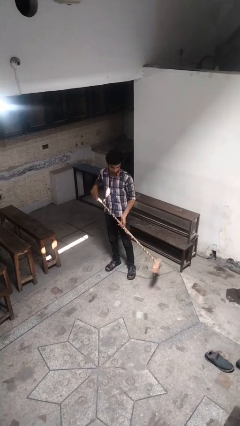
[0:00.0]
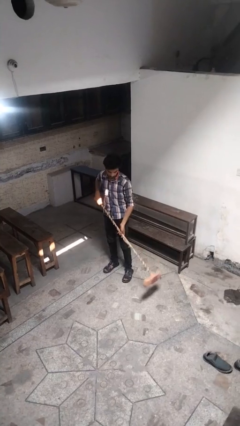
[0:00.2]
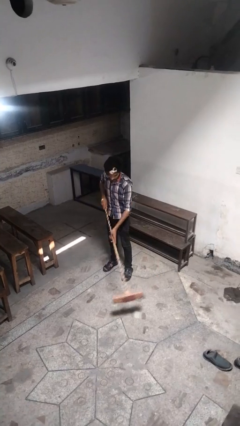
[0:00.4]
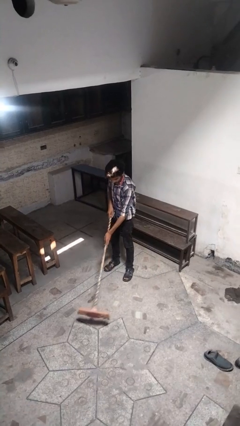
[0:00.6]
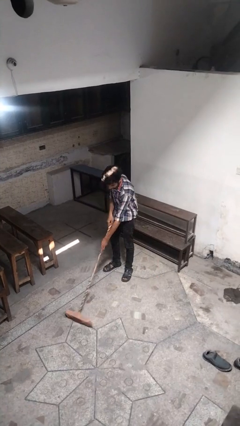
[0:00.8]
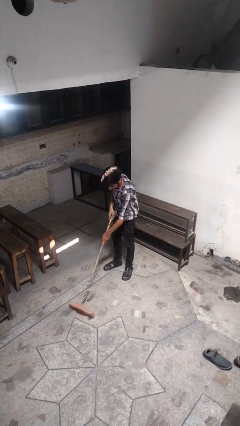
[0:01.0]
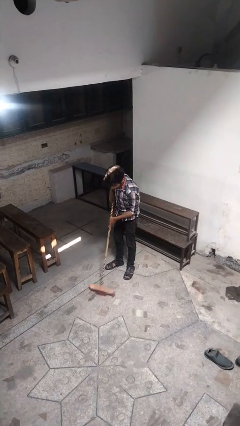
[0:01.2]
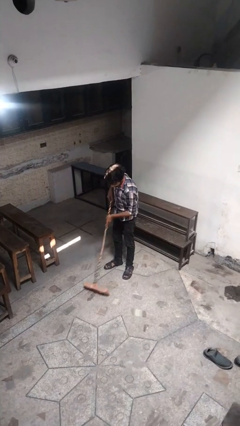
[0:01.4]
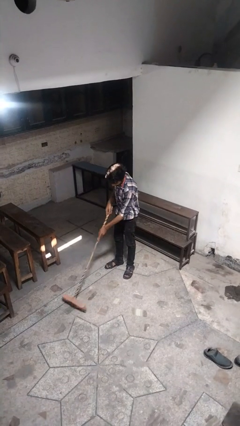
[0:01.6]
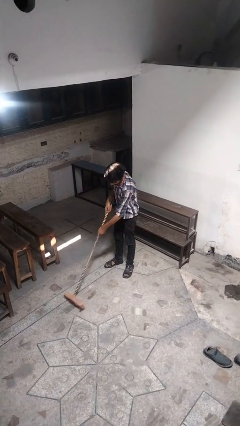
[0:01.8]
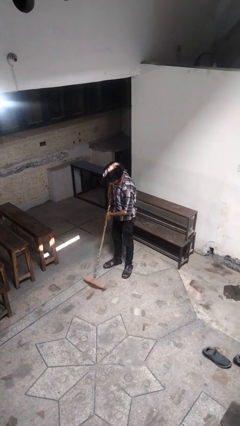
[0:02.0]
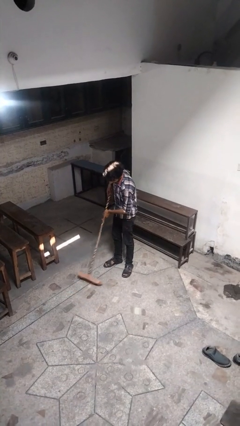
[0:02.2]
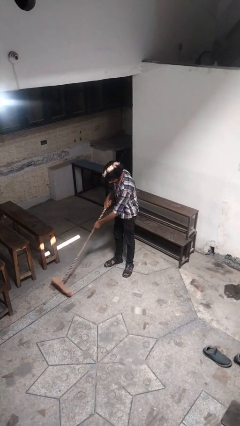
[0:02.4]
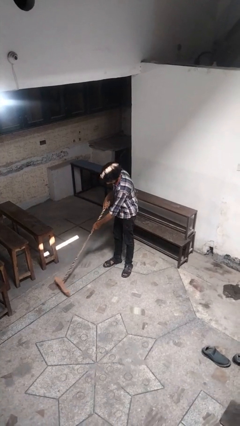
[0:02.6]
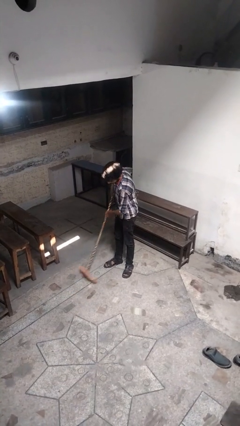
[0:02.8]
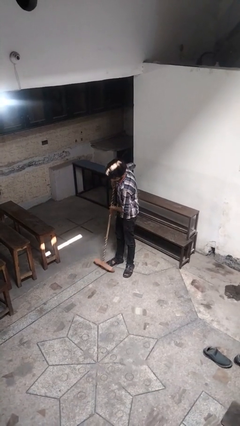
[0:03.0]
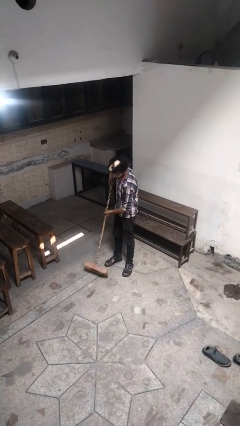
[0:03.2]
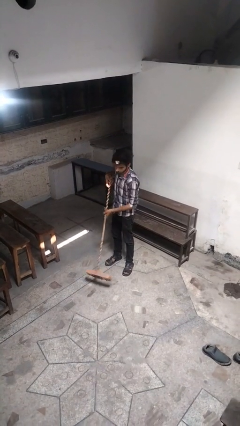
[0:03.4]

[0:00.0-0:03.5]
person sweeps floor

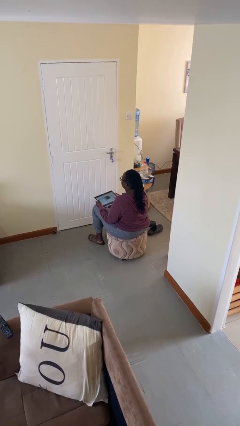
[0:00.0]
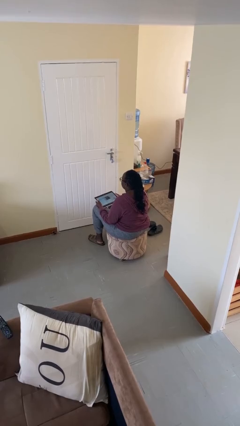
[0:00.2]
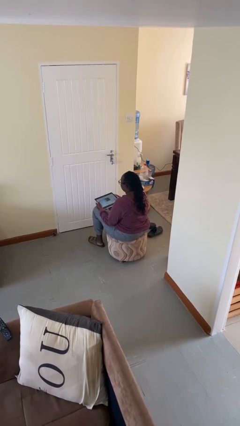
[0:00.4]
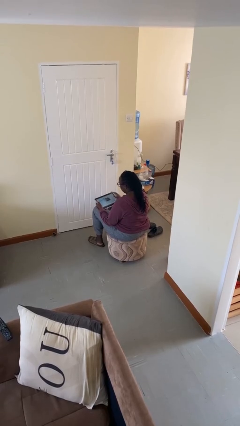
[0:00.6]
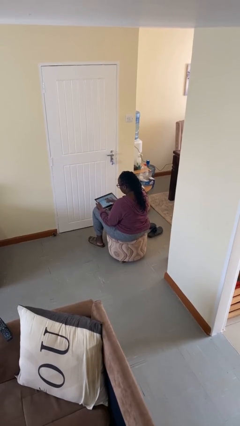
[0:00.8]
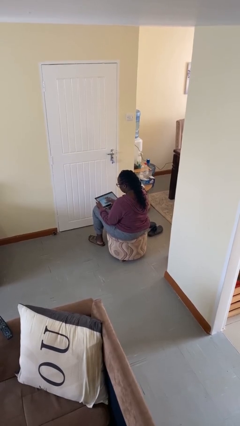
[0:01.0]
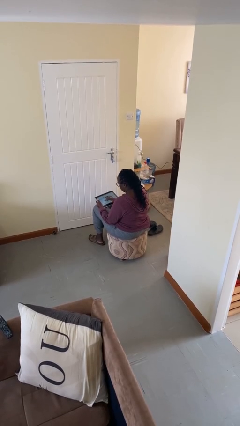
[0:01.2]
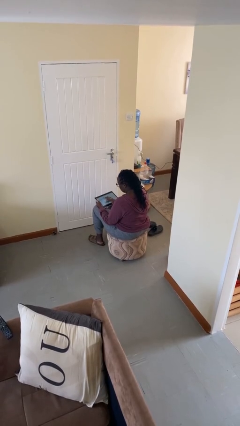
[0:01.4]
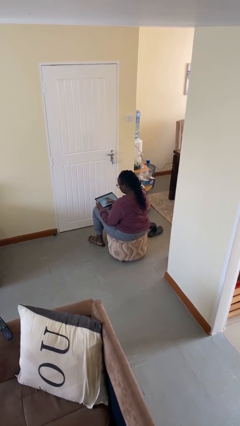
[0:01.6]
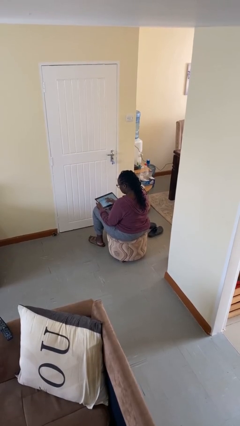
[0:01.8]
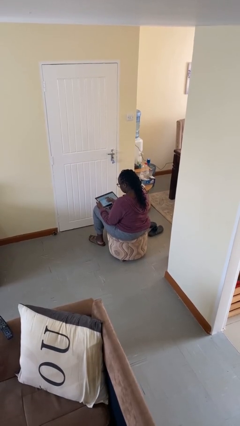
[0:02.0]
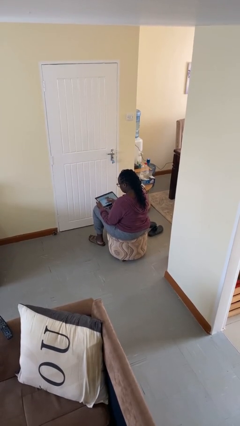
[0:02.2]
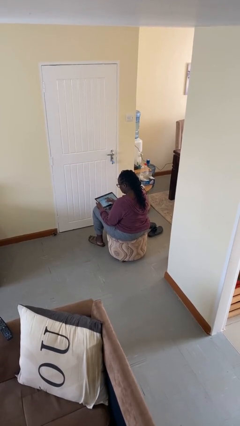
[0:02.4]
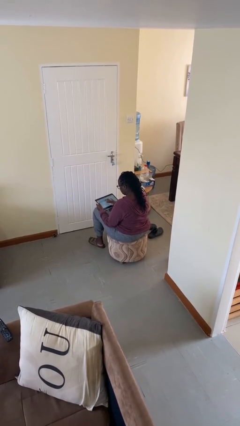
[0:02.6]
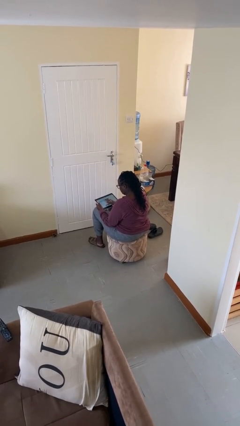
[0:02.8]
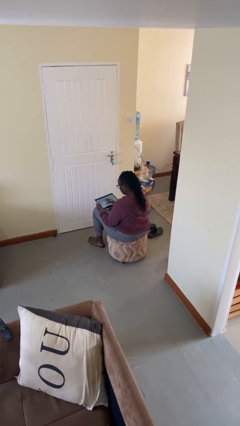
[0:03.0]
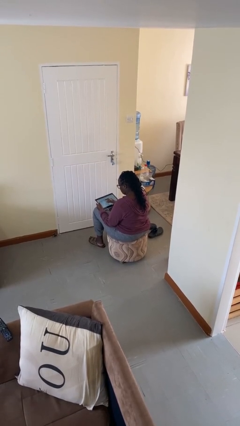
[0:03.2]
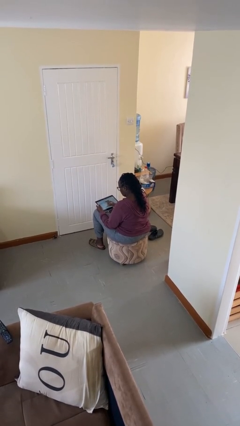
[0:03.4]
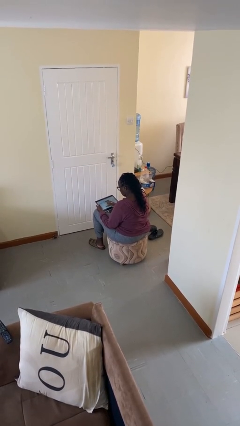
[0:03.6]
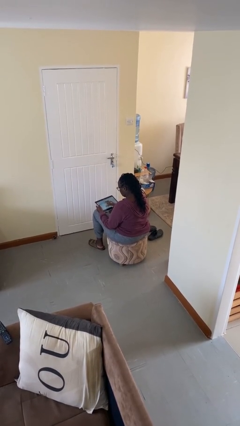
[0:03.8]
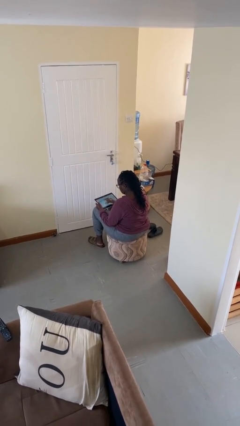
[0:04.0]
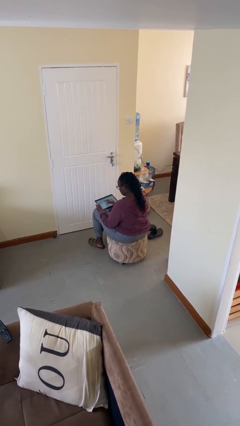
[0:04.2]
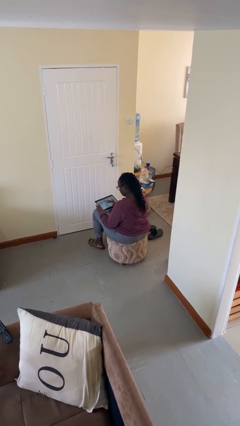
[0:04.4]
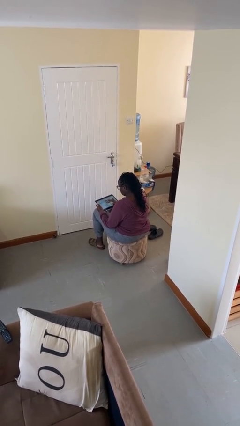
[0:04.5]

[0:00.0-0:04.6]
person interacts with tablet

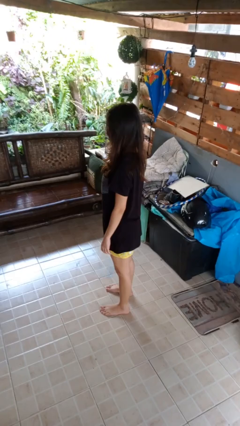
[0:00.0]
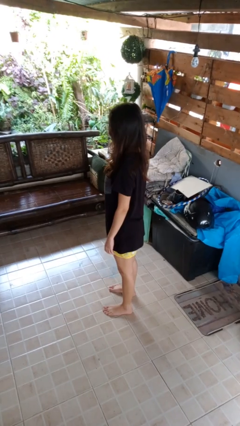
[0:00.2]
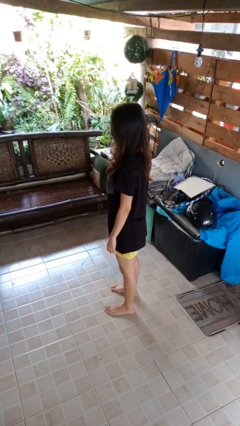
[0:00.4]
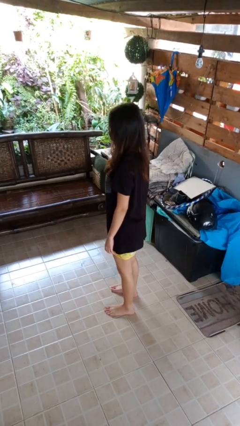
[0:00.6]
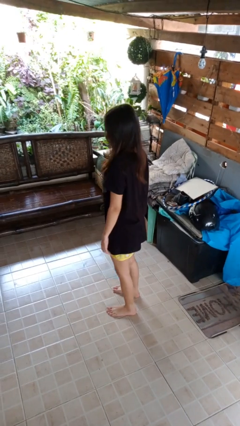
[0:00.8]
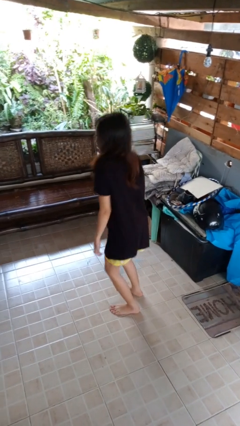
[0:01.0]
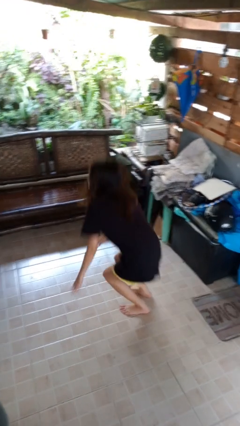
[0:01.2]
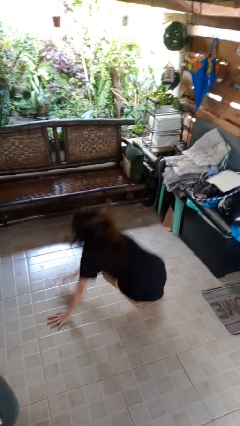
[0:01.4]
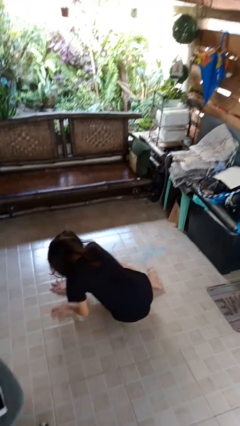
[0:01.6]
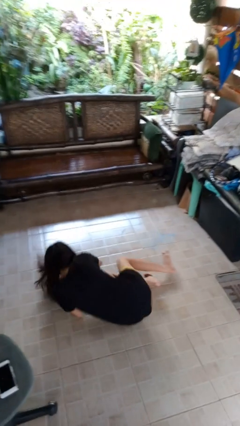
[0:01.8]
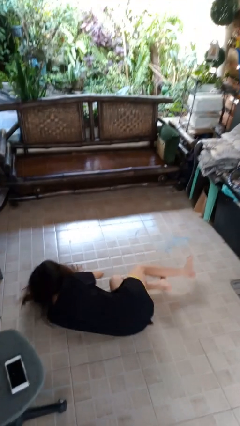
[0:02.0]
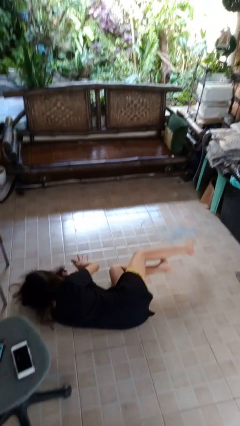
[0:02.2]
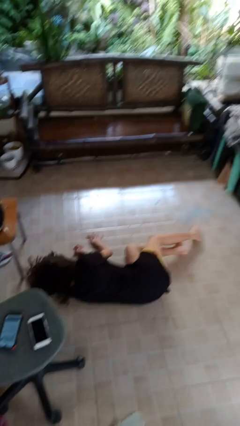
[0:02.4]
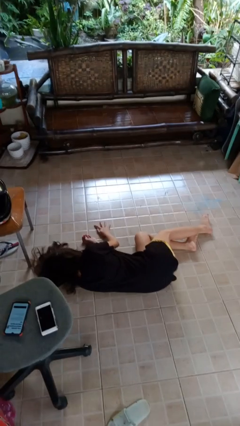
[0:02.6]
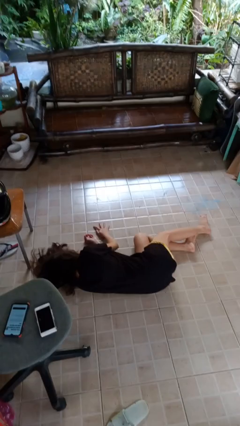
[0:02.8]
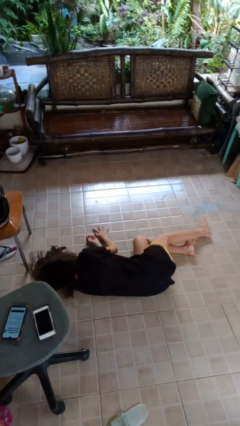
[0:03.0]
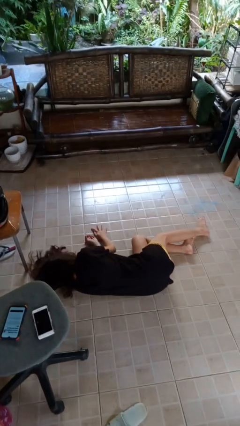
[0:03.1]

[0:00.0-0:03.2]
person falls while standing

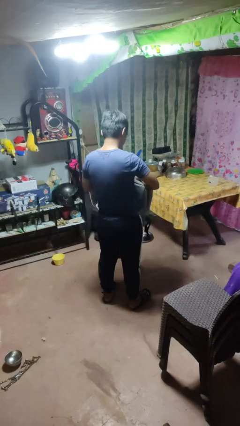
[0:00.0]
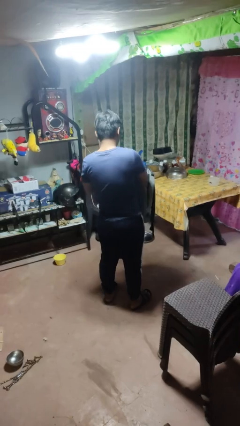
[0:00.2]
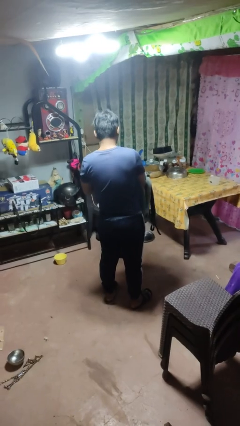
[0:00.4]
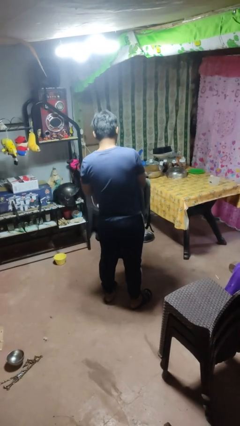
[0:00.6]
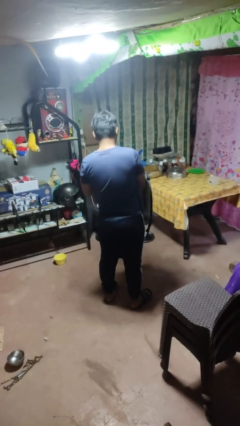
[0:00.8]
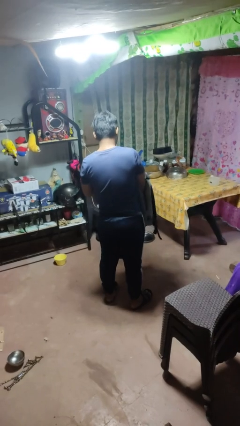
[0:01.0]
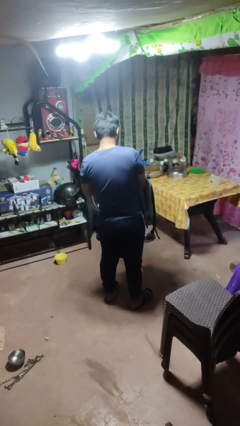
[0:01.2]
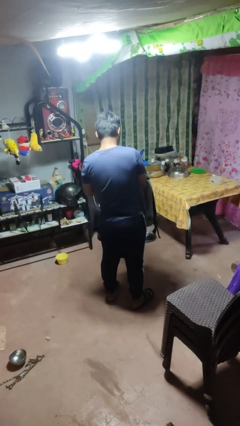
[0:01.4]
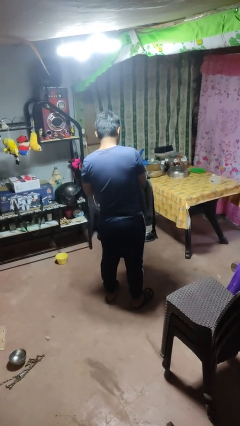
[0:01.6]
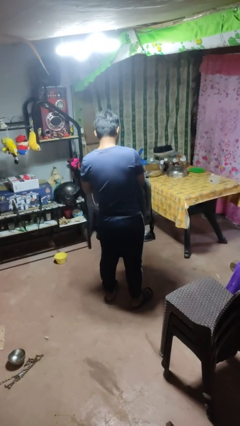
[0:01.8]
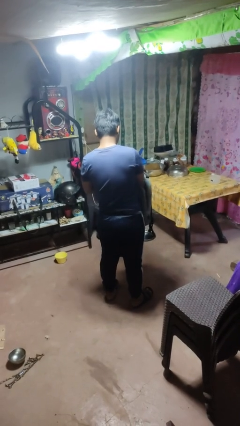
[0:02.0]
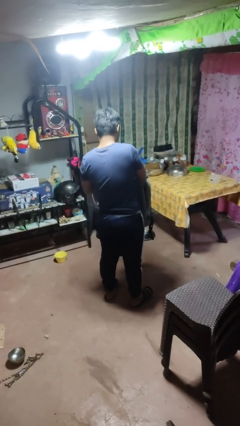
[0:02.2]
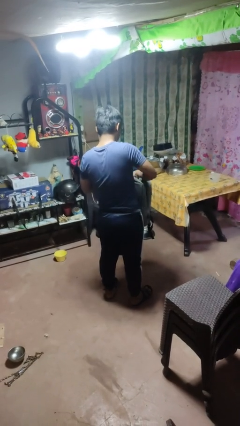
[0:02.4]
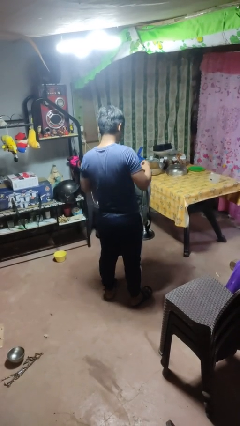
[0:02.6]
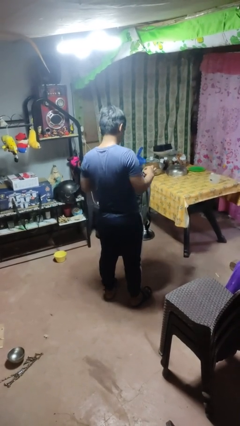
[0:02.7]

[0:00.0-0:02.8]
person searches in bag

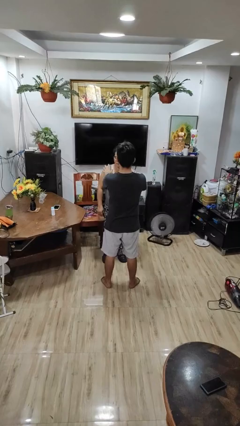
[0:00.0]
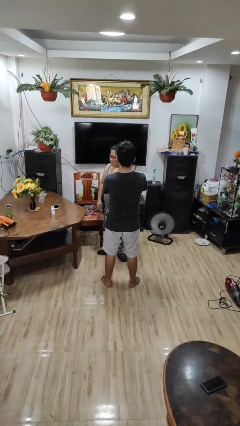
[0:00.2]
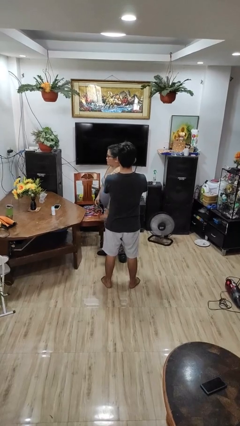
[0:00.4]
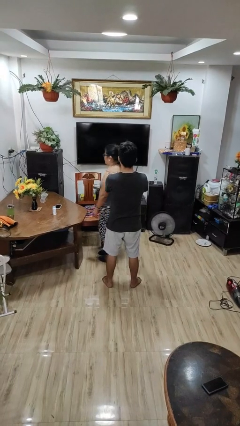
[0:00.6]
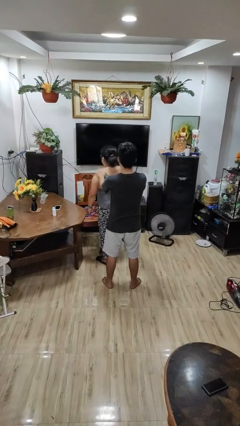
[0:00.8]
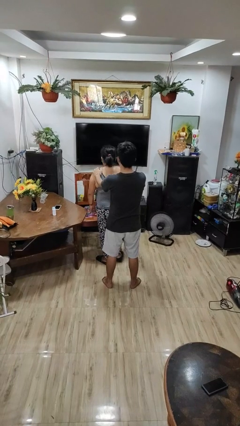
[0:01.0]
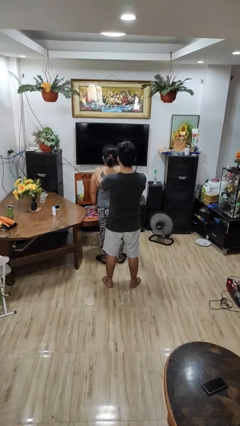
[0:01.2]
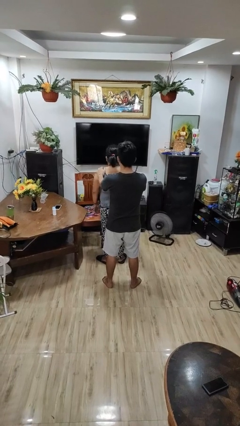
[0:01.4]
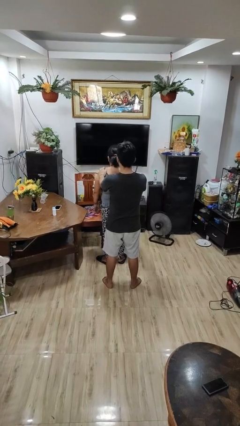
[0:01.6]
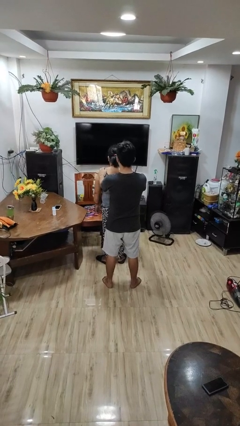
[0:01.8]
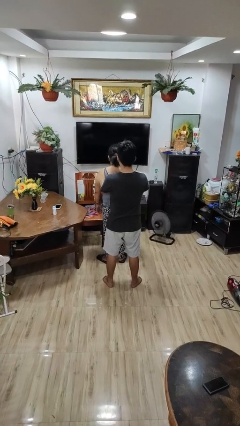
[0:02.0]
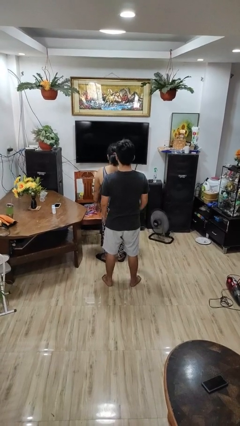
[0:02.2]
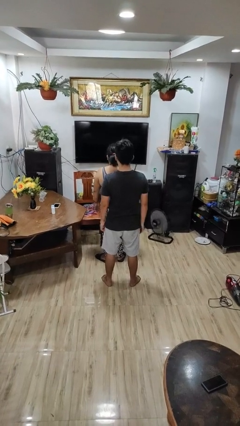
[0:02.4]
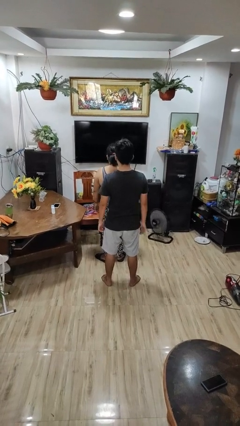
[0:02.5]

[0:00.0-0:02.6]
person spins person around
